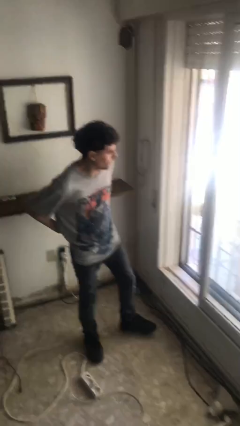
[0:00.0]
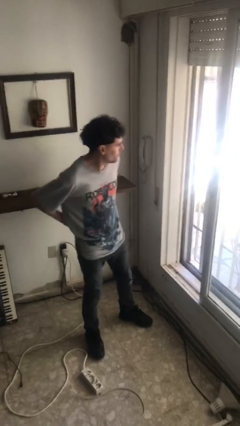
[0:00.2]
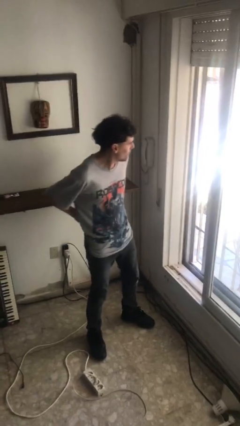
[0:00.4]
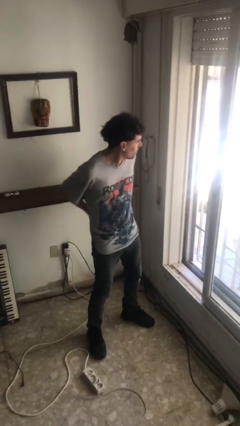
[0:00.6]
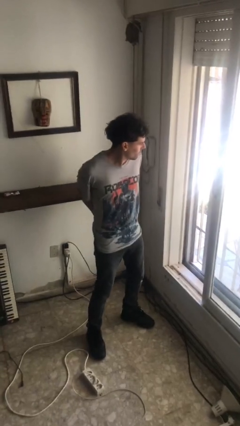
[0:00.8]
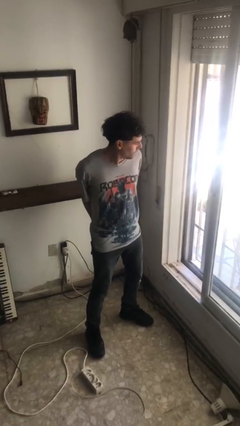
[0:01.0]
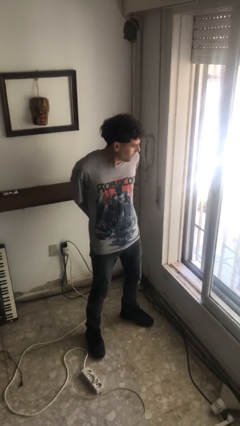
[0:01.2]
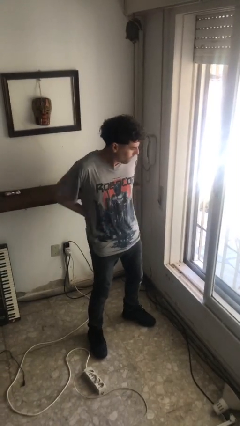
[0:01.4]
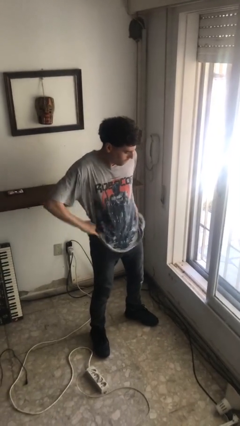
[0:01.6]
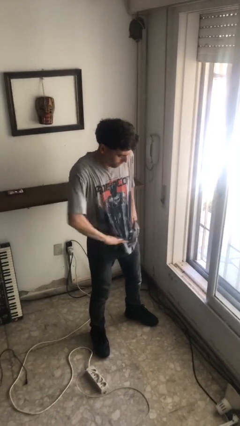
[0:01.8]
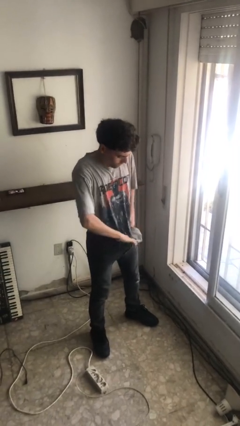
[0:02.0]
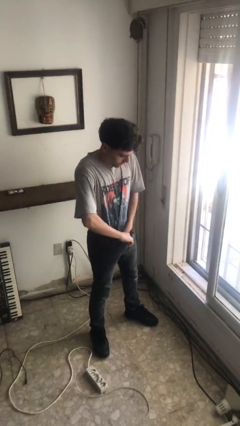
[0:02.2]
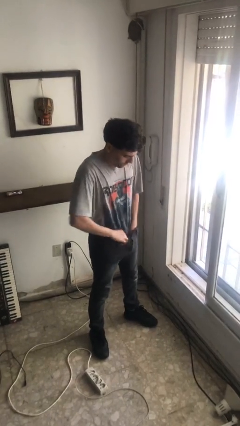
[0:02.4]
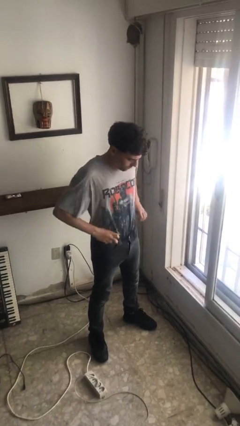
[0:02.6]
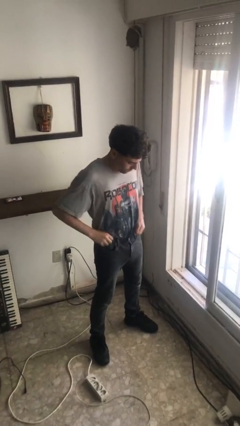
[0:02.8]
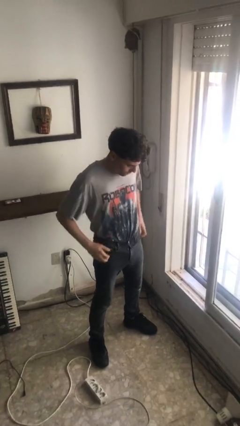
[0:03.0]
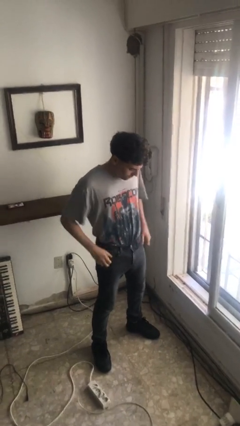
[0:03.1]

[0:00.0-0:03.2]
person tucks in shirt

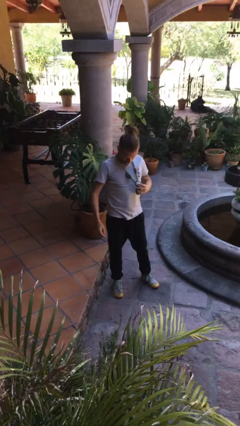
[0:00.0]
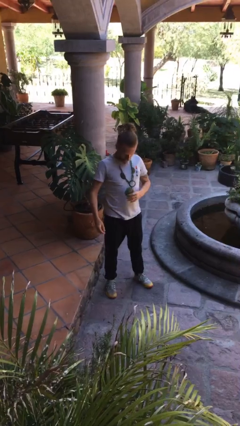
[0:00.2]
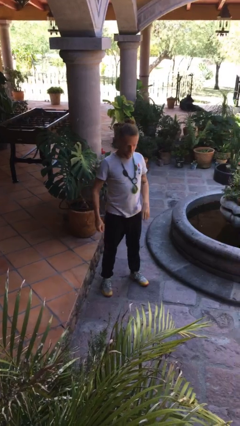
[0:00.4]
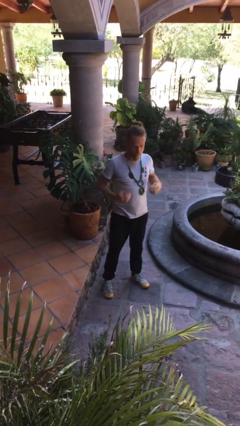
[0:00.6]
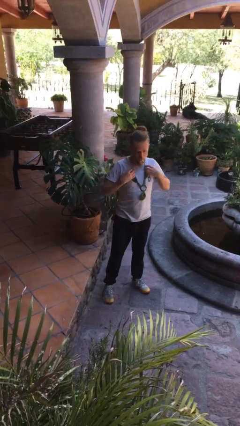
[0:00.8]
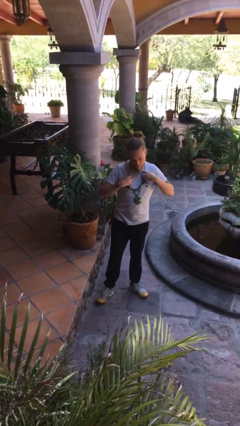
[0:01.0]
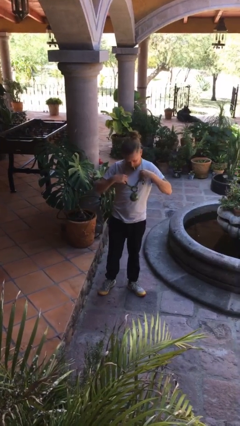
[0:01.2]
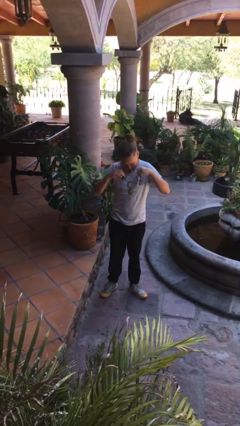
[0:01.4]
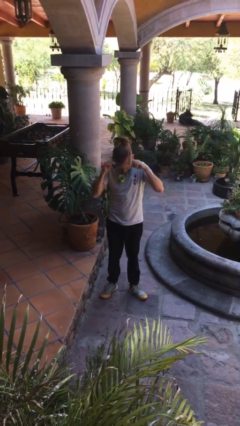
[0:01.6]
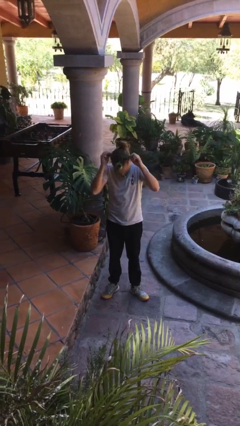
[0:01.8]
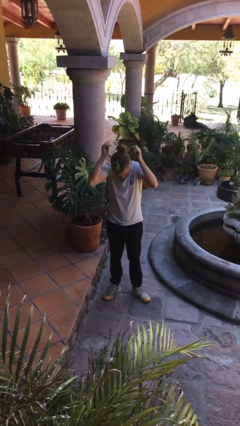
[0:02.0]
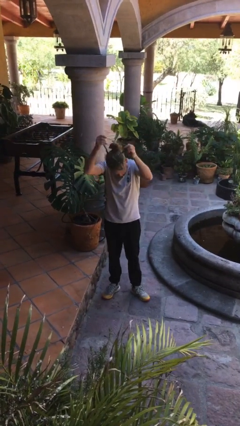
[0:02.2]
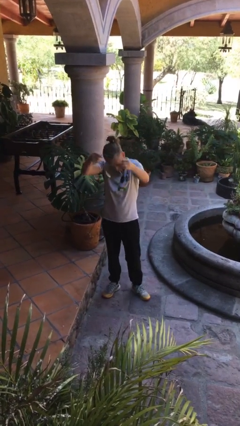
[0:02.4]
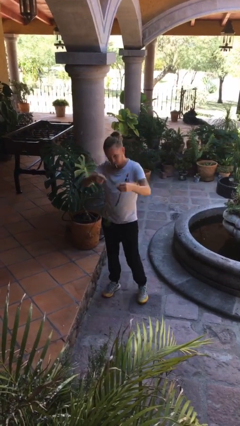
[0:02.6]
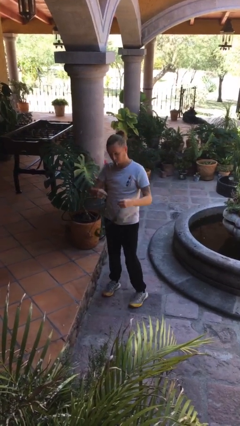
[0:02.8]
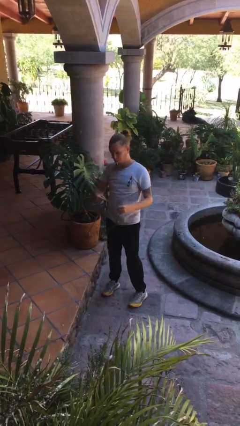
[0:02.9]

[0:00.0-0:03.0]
person takes off necklace

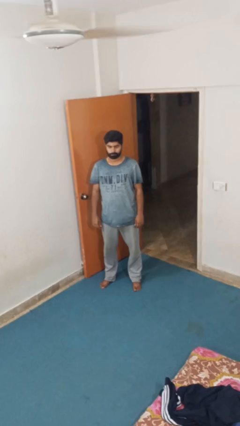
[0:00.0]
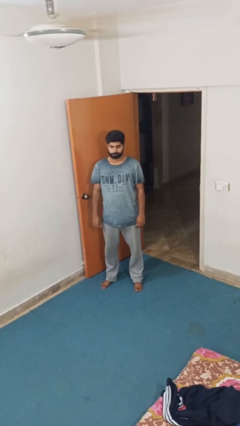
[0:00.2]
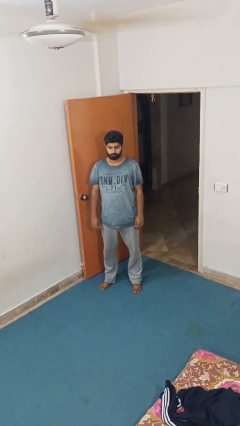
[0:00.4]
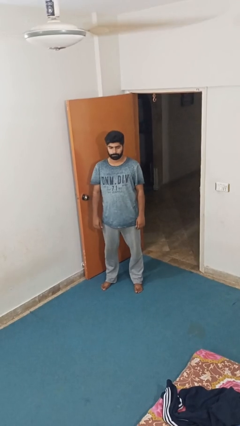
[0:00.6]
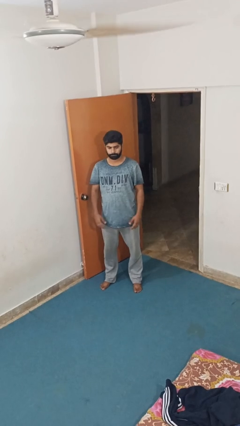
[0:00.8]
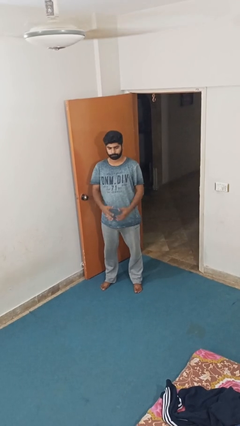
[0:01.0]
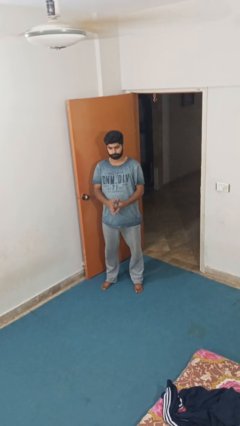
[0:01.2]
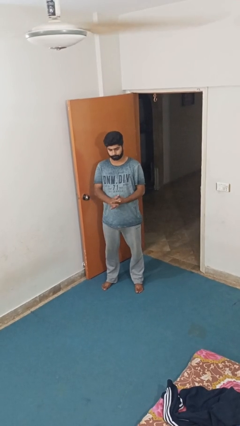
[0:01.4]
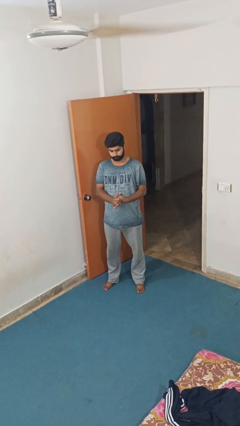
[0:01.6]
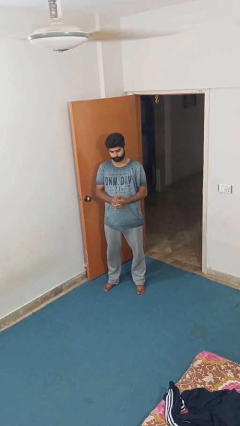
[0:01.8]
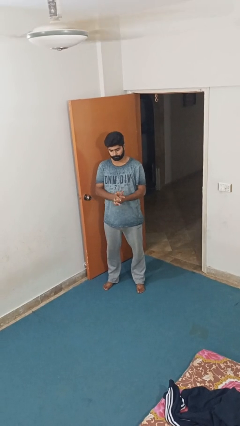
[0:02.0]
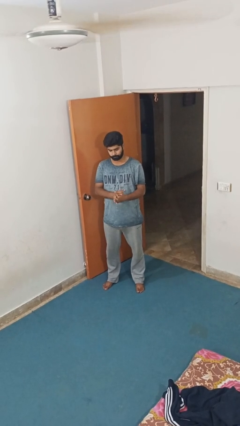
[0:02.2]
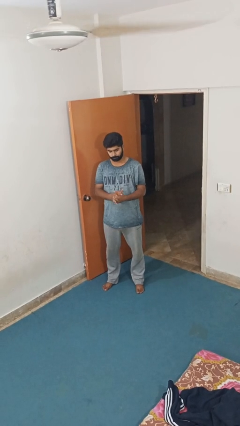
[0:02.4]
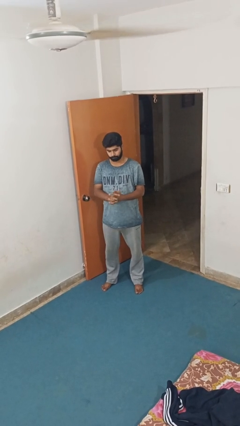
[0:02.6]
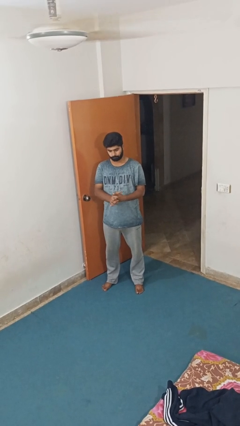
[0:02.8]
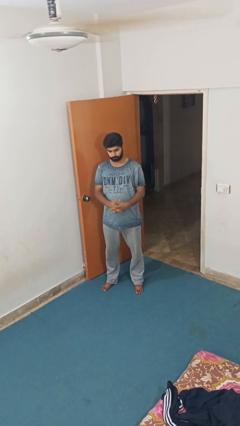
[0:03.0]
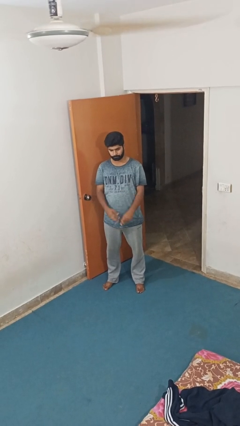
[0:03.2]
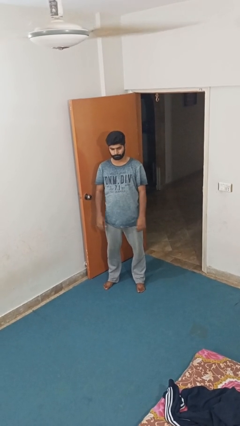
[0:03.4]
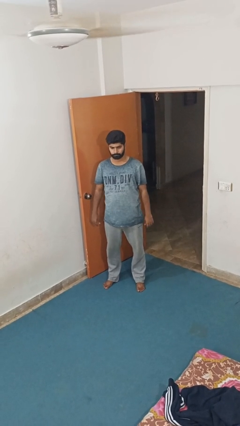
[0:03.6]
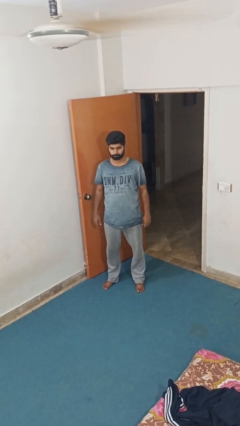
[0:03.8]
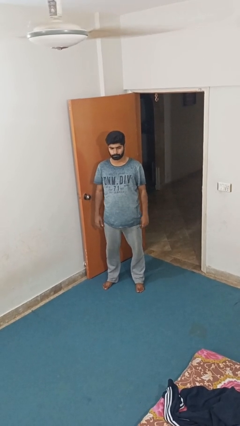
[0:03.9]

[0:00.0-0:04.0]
person snaps fingers

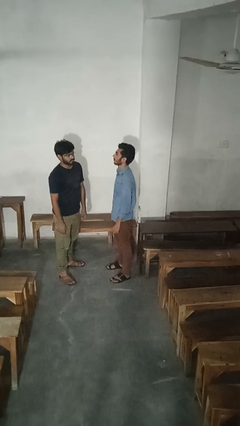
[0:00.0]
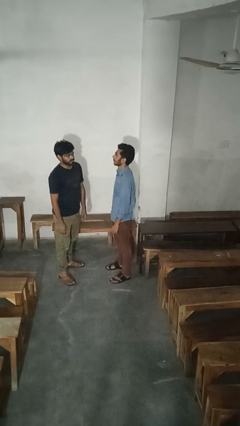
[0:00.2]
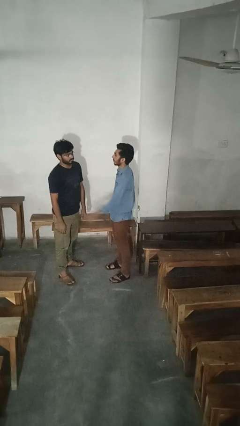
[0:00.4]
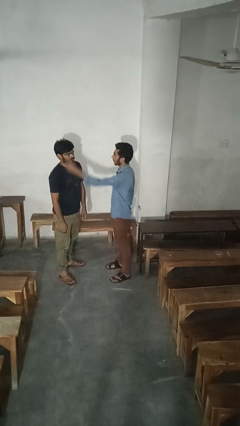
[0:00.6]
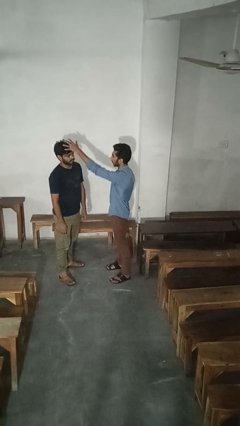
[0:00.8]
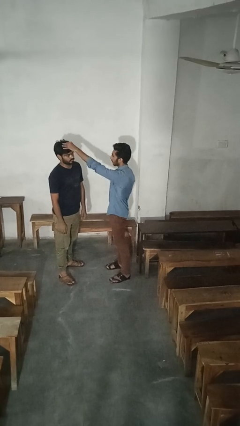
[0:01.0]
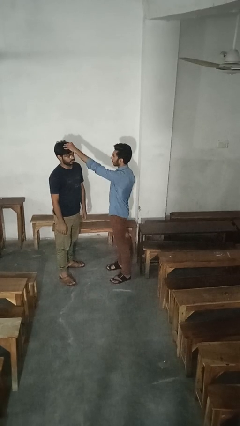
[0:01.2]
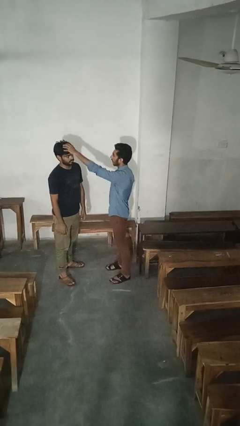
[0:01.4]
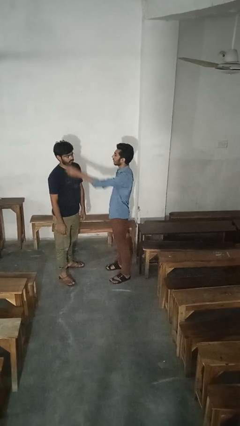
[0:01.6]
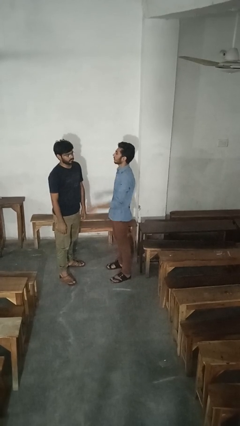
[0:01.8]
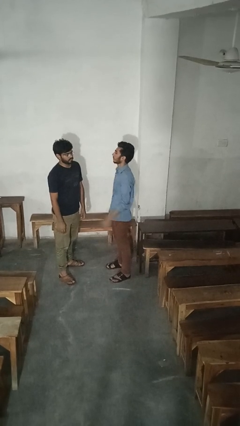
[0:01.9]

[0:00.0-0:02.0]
person grabs person by hair

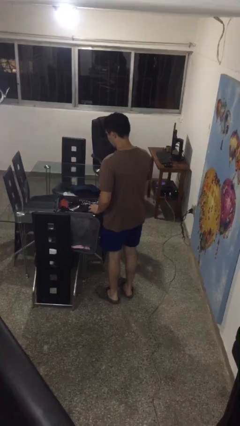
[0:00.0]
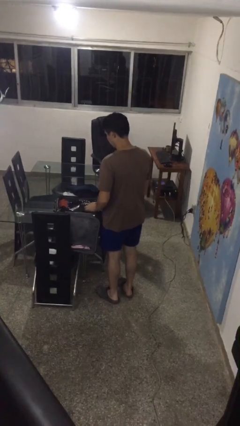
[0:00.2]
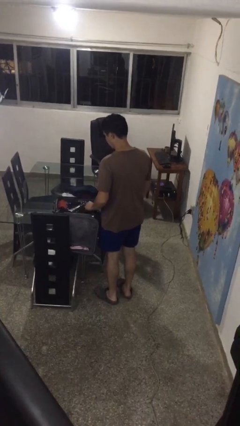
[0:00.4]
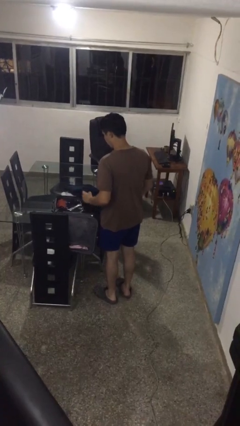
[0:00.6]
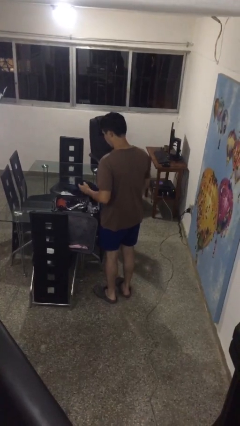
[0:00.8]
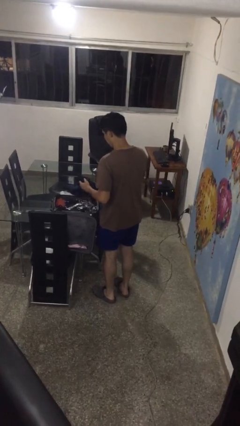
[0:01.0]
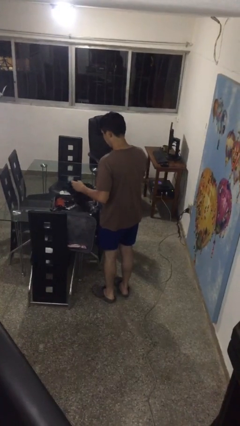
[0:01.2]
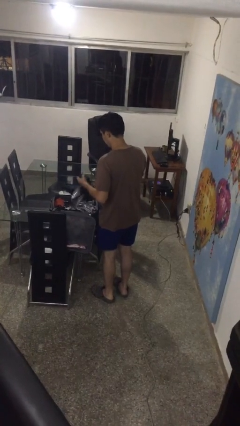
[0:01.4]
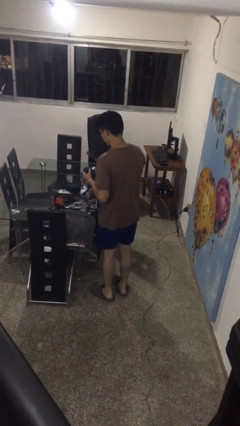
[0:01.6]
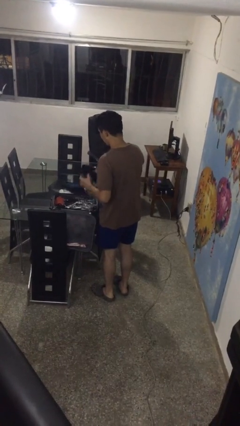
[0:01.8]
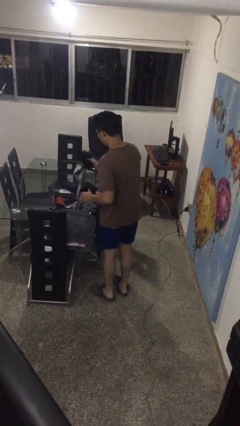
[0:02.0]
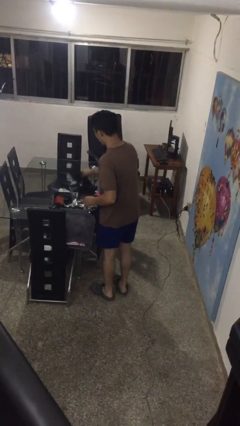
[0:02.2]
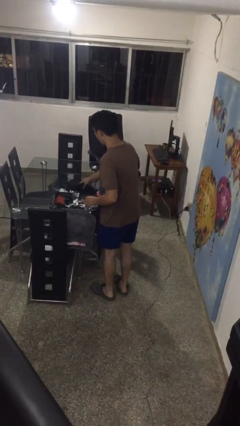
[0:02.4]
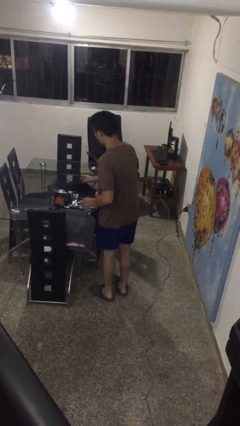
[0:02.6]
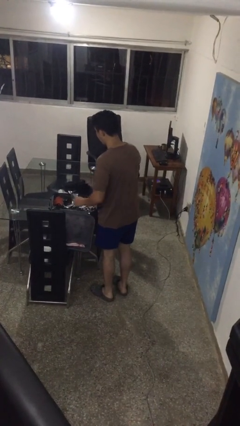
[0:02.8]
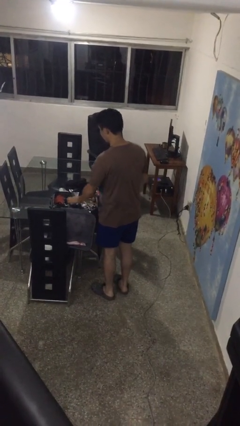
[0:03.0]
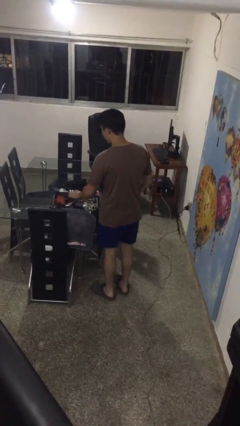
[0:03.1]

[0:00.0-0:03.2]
person unloads clothes from suitcase

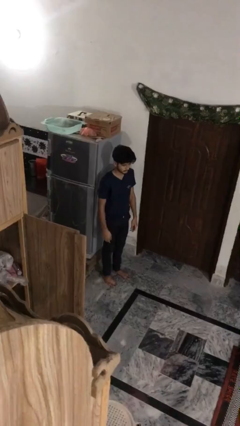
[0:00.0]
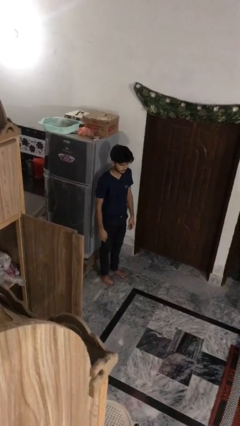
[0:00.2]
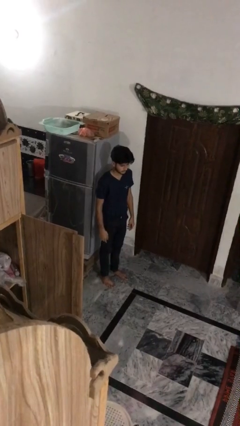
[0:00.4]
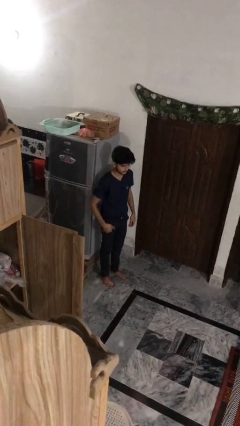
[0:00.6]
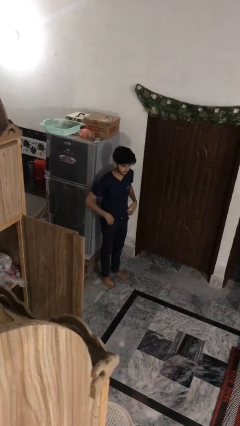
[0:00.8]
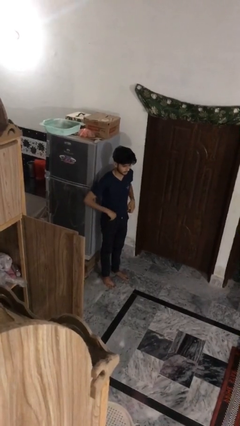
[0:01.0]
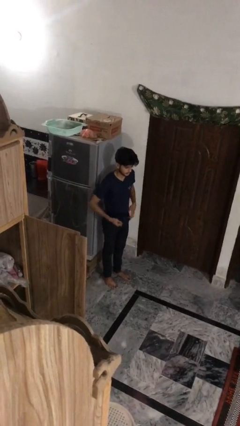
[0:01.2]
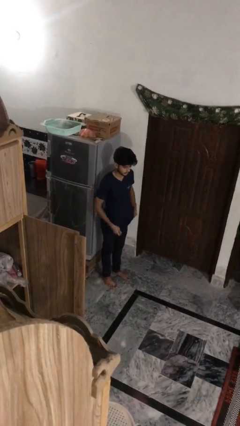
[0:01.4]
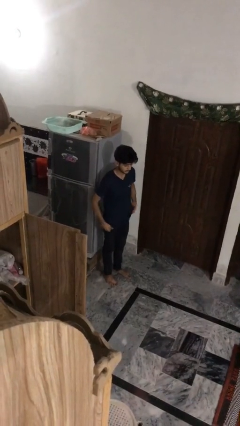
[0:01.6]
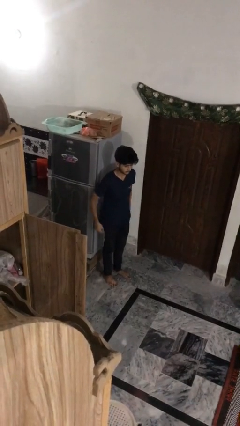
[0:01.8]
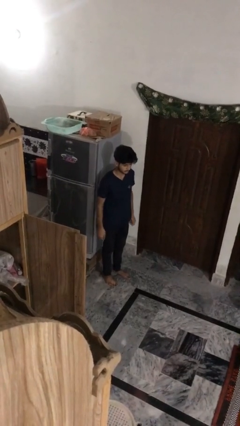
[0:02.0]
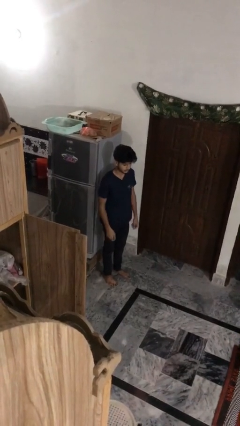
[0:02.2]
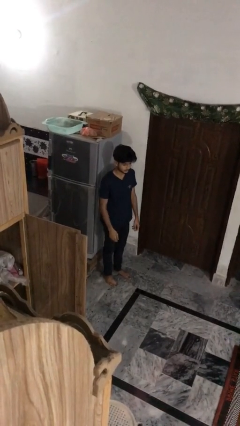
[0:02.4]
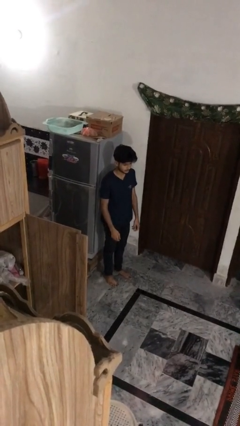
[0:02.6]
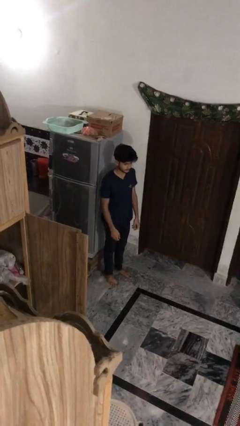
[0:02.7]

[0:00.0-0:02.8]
person untucks shirt
